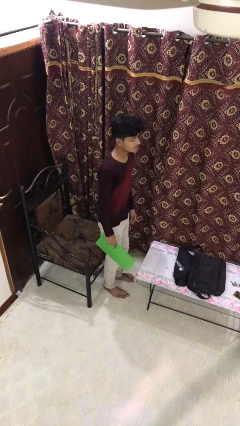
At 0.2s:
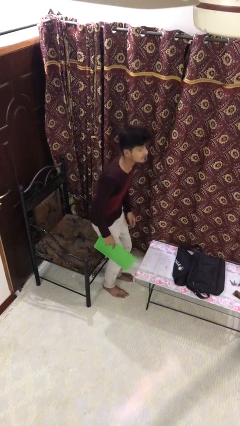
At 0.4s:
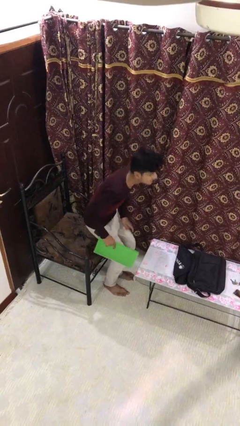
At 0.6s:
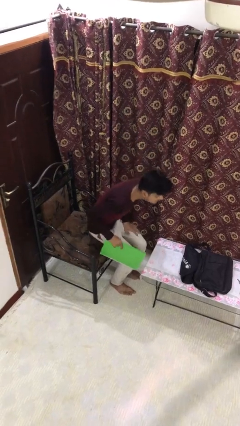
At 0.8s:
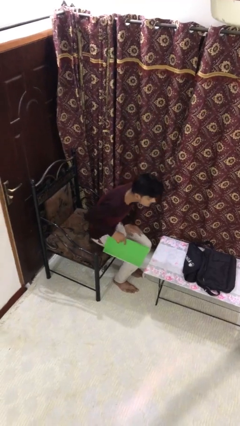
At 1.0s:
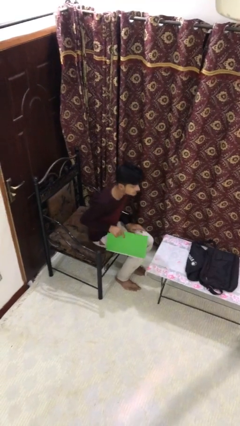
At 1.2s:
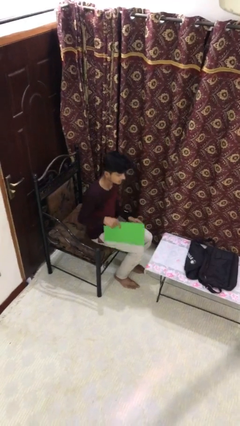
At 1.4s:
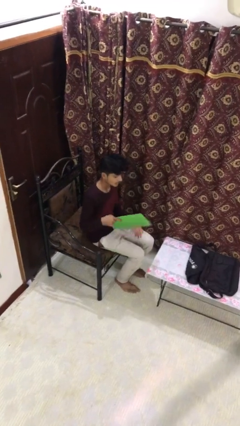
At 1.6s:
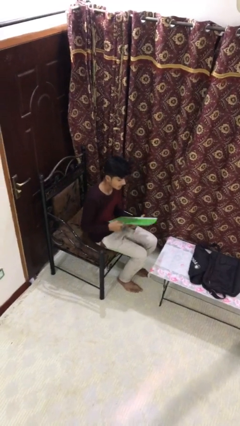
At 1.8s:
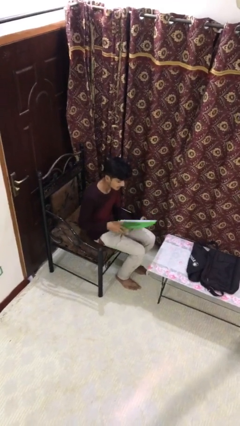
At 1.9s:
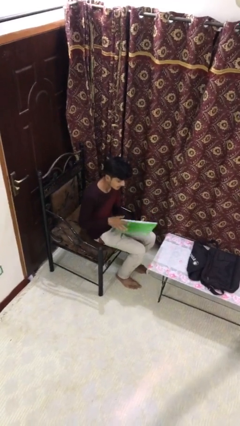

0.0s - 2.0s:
person sits down

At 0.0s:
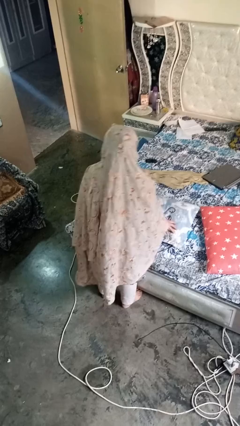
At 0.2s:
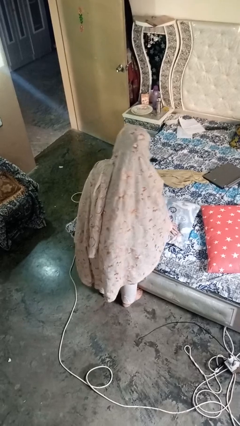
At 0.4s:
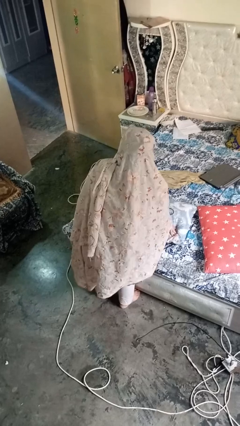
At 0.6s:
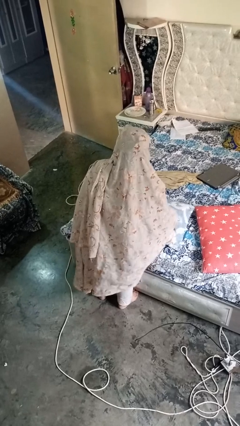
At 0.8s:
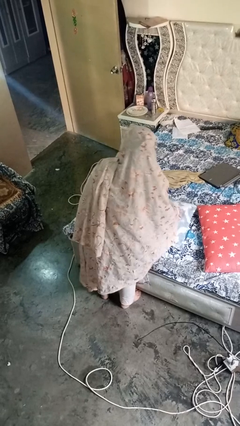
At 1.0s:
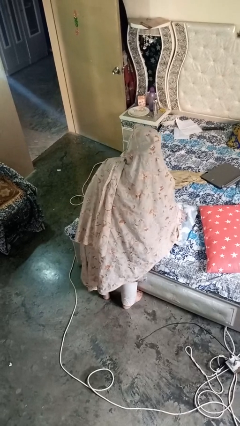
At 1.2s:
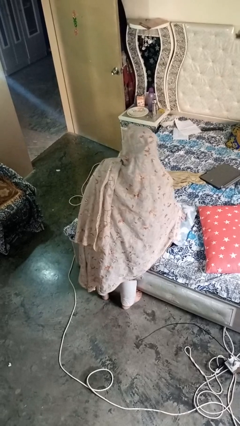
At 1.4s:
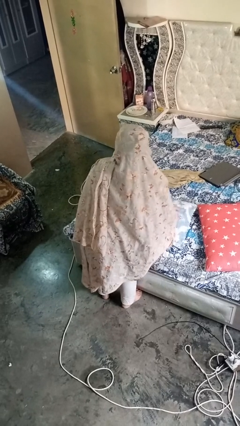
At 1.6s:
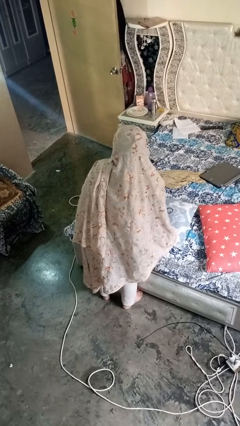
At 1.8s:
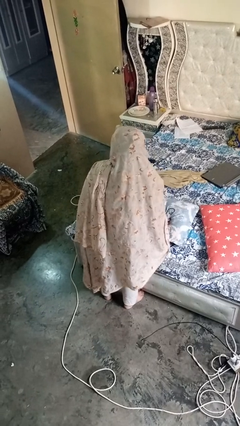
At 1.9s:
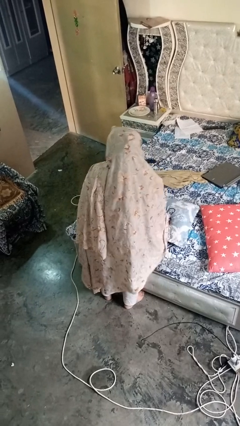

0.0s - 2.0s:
person taps object with finger

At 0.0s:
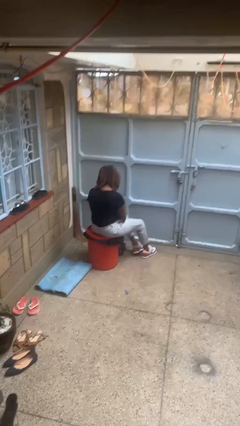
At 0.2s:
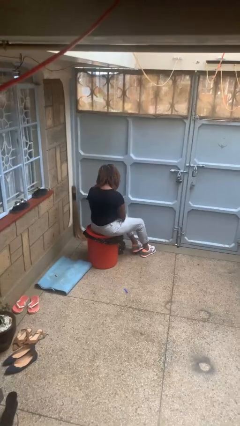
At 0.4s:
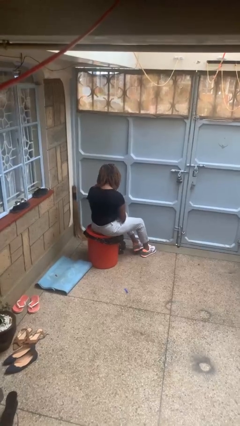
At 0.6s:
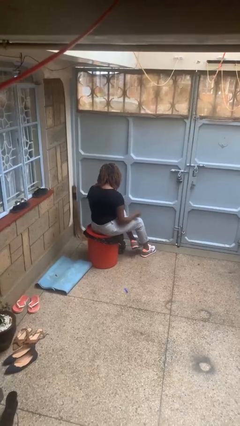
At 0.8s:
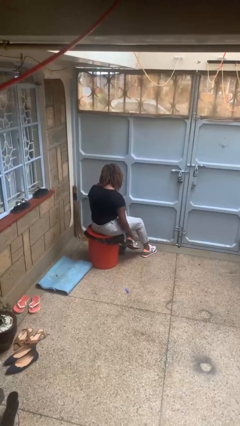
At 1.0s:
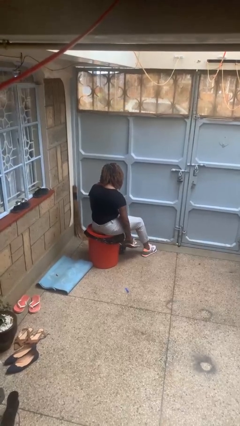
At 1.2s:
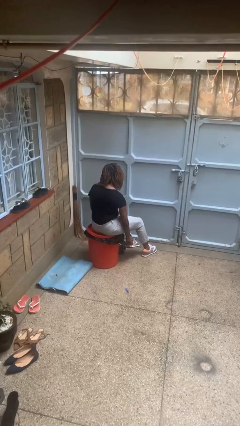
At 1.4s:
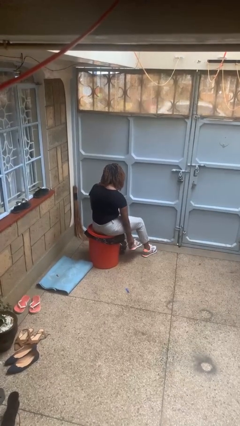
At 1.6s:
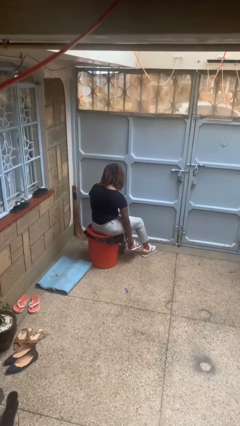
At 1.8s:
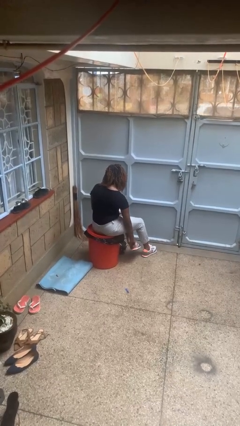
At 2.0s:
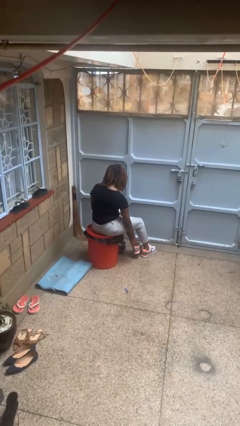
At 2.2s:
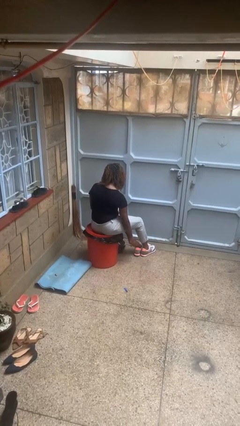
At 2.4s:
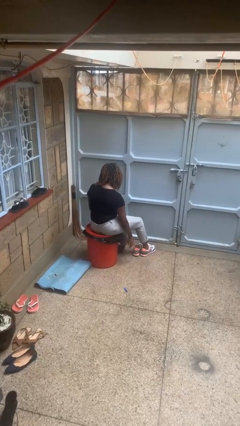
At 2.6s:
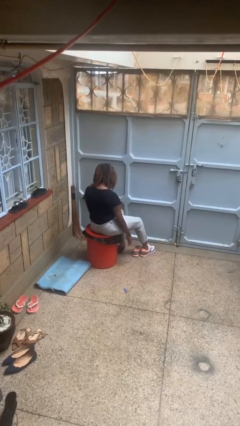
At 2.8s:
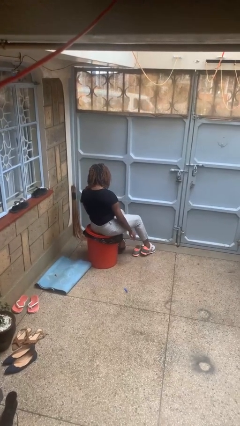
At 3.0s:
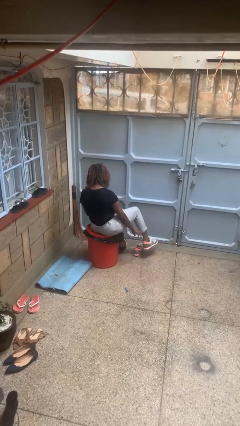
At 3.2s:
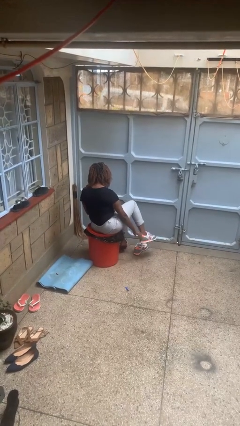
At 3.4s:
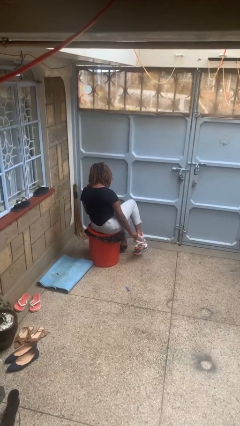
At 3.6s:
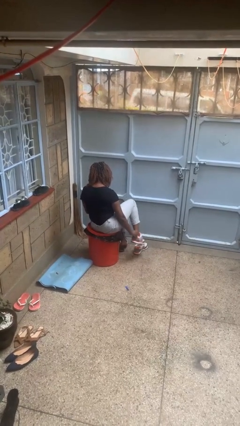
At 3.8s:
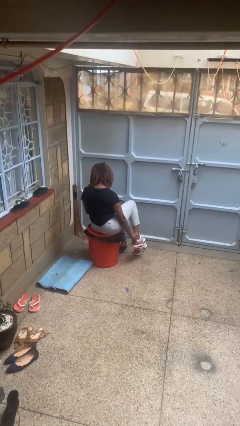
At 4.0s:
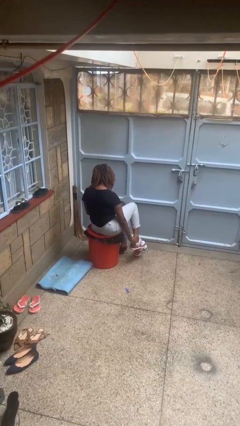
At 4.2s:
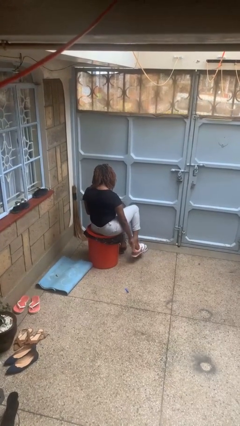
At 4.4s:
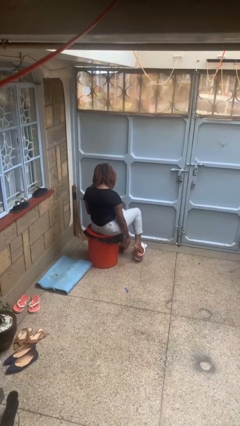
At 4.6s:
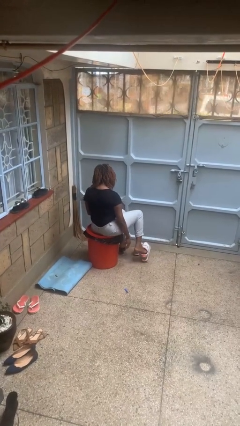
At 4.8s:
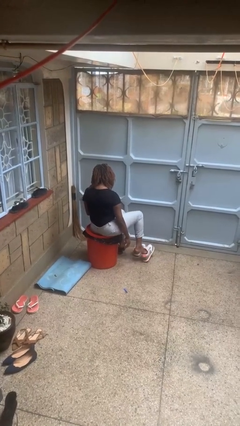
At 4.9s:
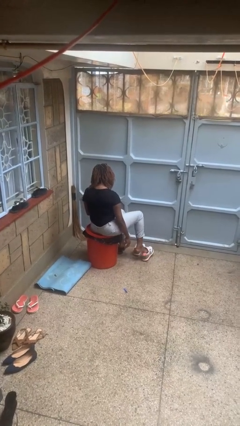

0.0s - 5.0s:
person takes off shoes

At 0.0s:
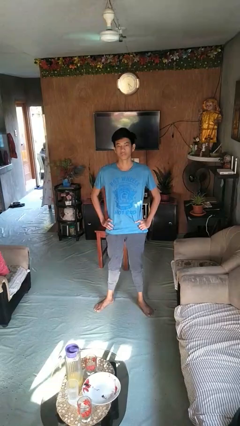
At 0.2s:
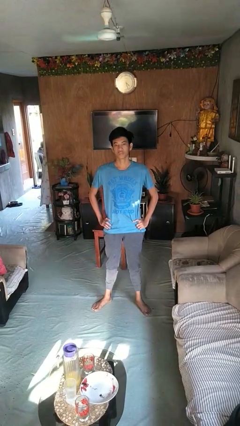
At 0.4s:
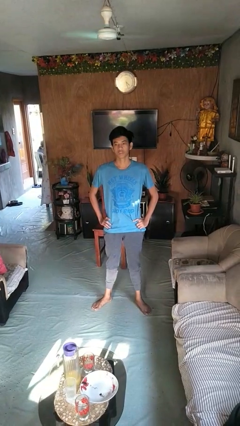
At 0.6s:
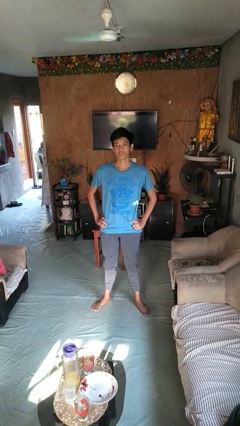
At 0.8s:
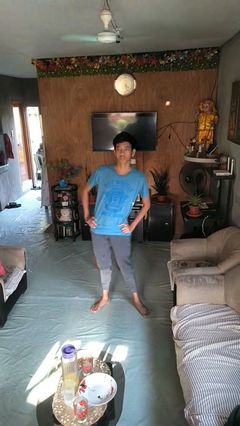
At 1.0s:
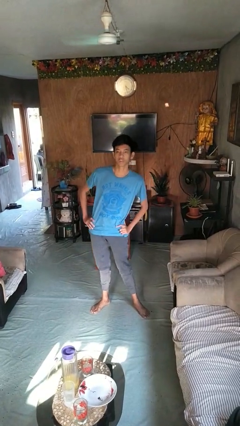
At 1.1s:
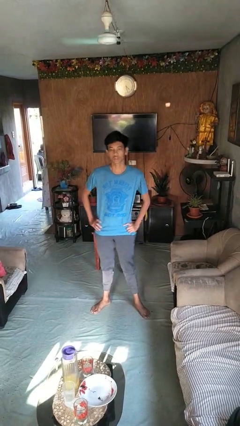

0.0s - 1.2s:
person wiggles hips

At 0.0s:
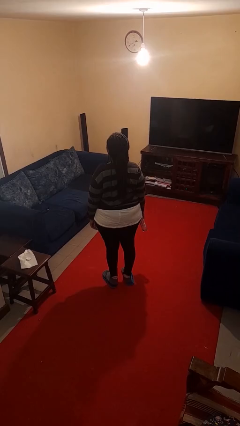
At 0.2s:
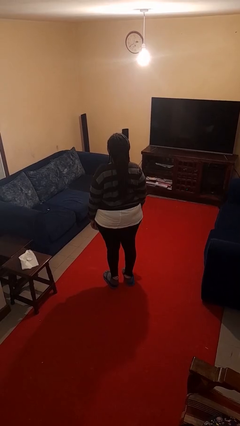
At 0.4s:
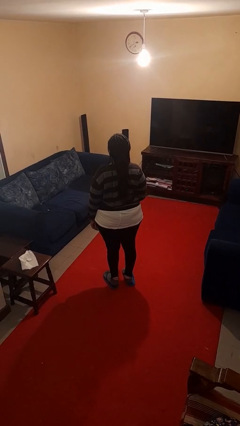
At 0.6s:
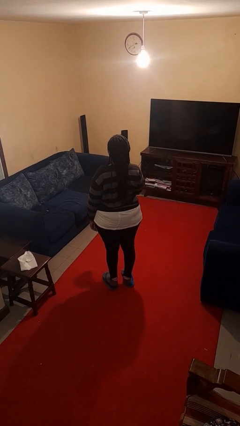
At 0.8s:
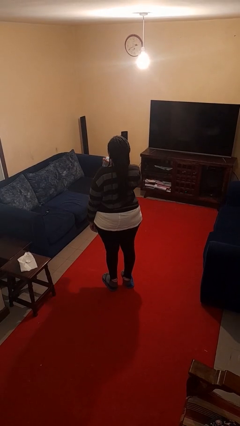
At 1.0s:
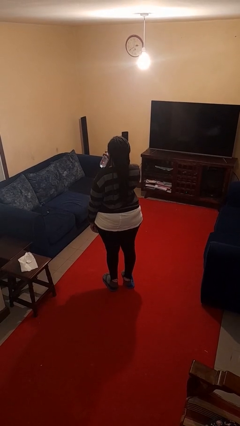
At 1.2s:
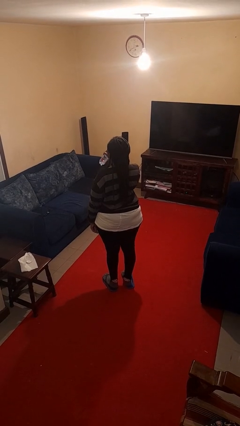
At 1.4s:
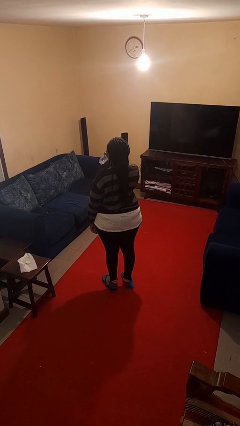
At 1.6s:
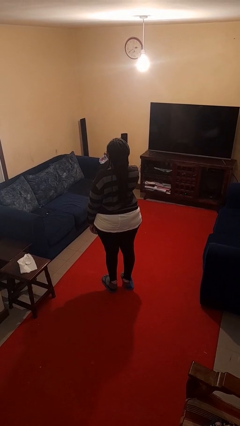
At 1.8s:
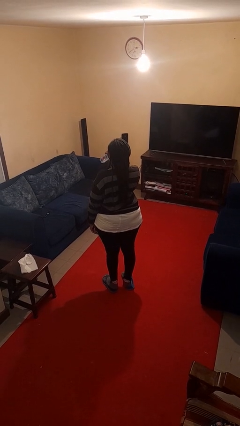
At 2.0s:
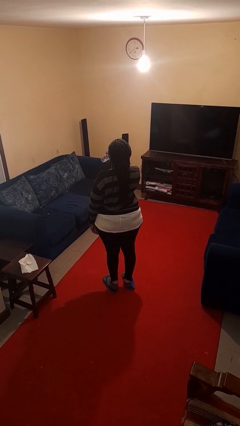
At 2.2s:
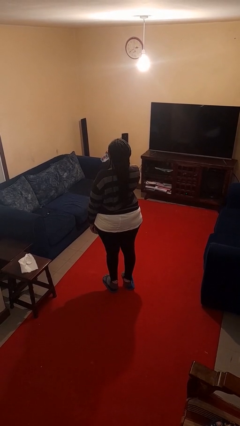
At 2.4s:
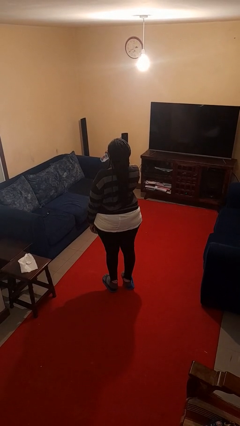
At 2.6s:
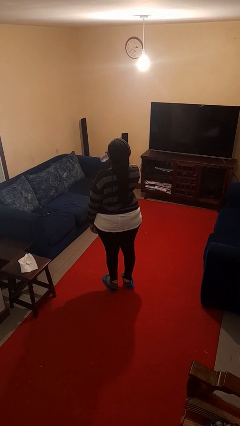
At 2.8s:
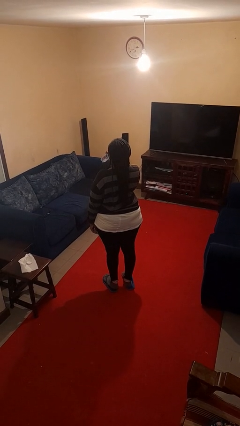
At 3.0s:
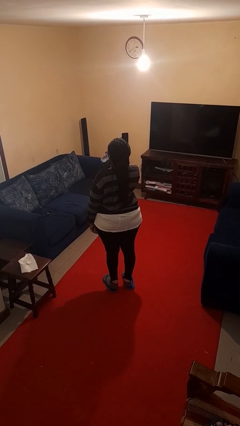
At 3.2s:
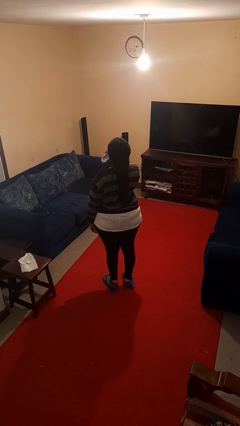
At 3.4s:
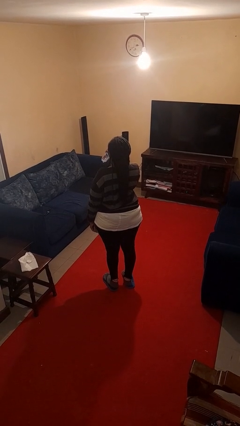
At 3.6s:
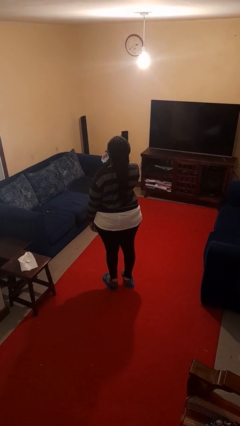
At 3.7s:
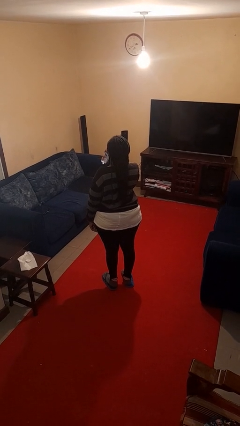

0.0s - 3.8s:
person drinks from bottle

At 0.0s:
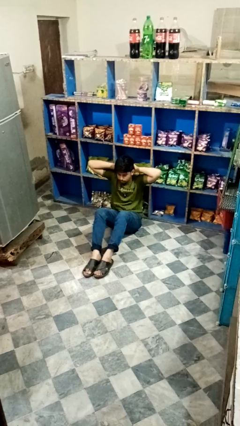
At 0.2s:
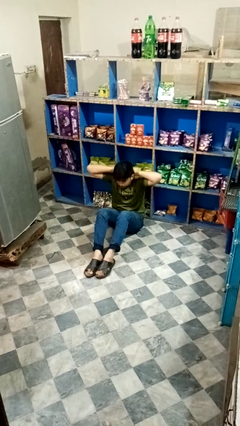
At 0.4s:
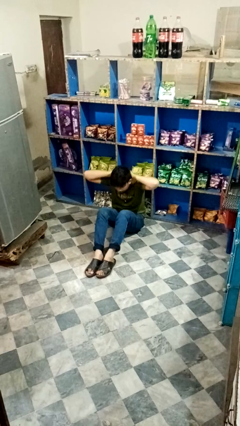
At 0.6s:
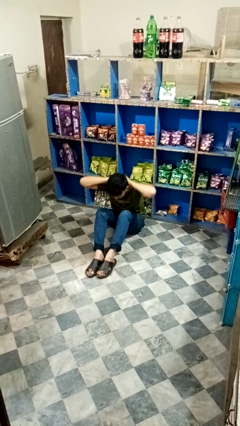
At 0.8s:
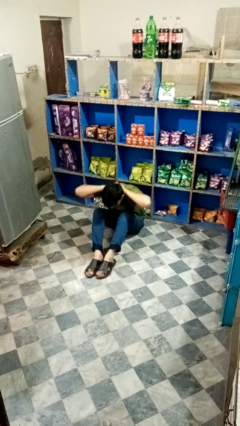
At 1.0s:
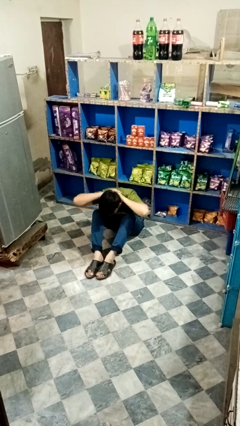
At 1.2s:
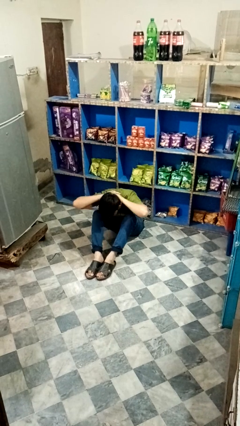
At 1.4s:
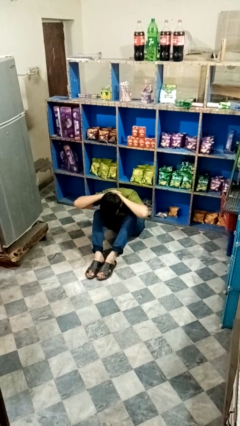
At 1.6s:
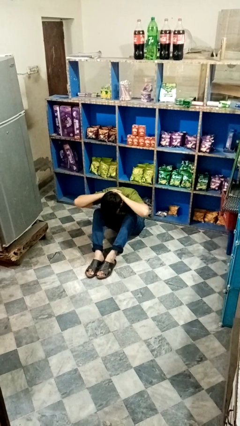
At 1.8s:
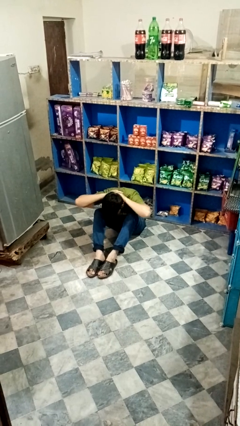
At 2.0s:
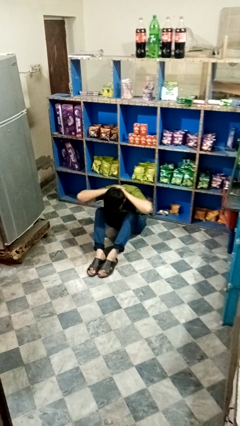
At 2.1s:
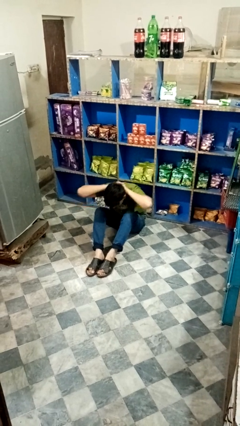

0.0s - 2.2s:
person exercises with situp

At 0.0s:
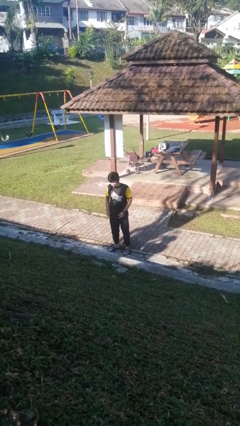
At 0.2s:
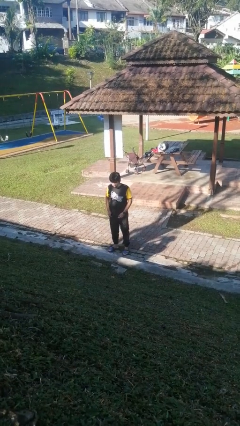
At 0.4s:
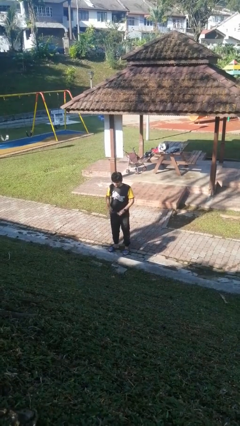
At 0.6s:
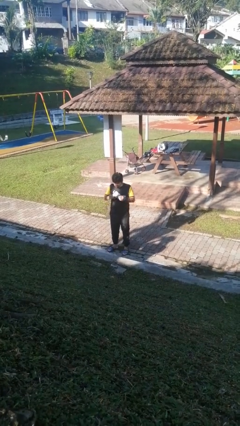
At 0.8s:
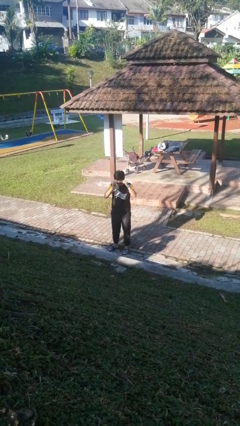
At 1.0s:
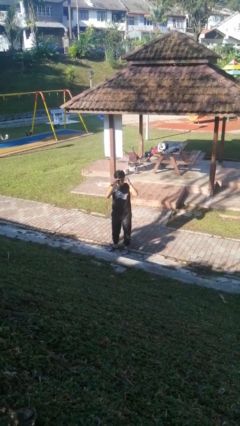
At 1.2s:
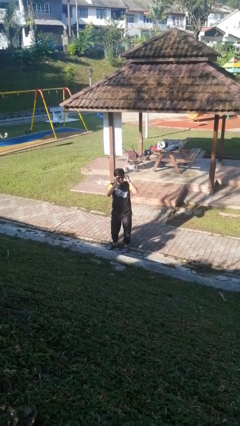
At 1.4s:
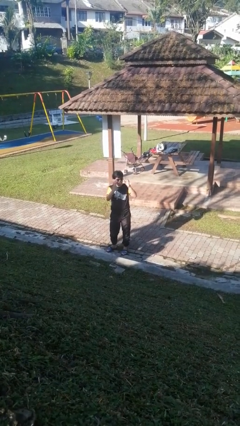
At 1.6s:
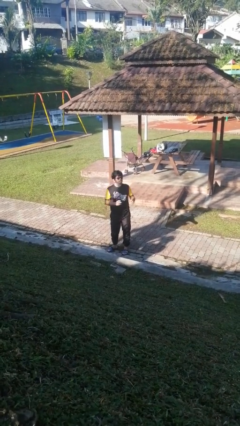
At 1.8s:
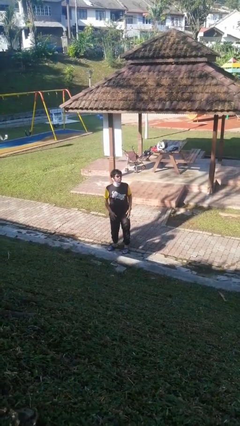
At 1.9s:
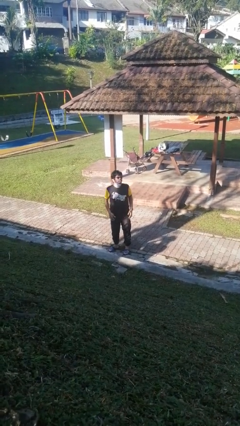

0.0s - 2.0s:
person puts on sunglasses
